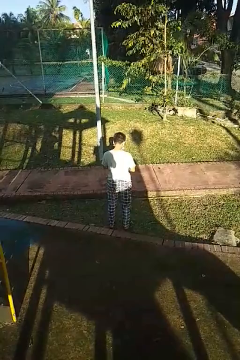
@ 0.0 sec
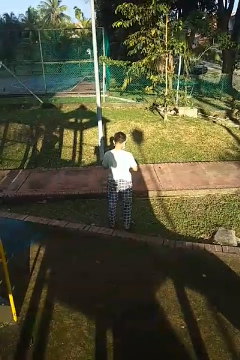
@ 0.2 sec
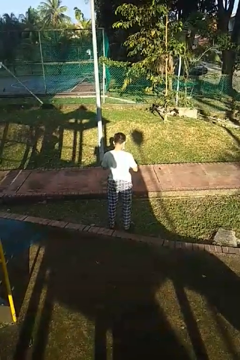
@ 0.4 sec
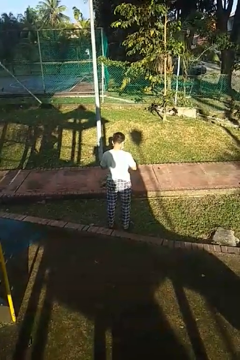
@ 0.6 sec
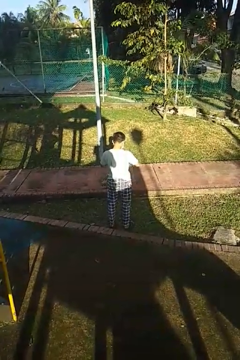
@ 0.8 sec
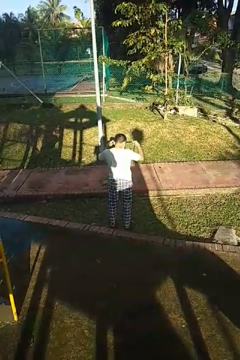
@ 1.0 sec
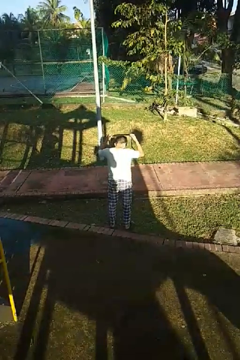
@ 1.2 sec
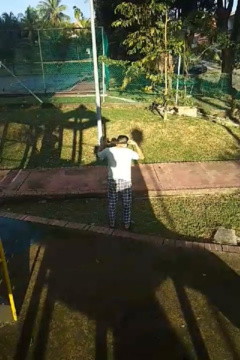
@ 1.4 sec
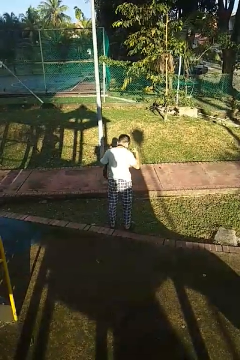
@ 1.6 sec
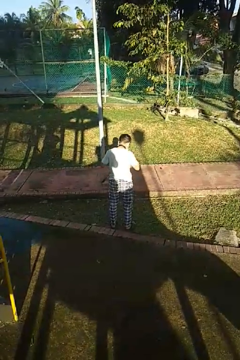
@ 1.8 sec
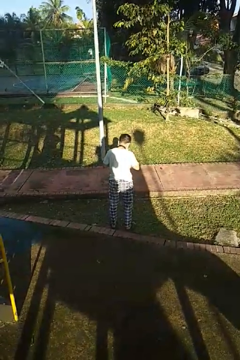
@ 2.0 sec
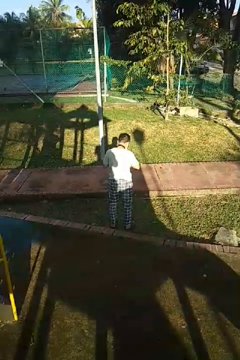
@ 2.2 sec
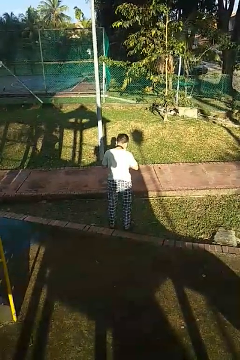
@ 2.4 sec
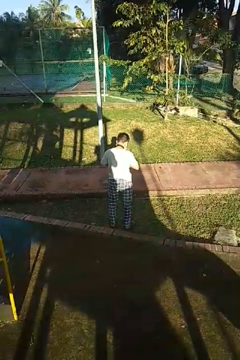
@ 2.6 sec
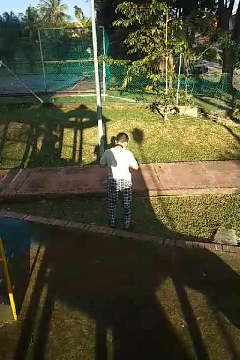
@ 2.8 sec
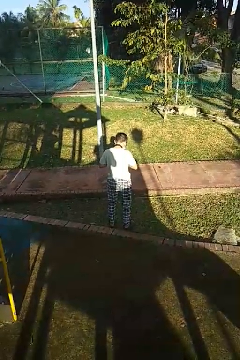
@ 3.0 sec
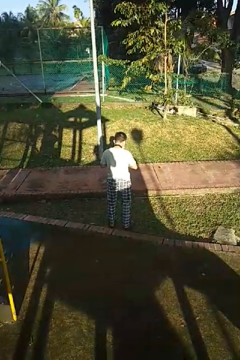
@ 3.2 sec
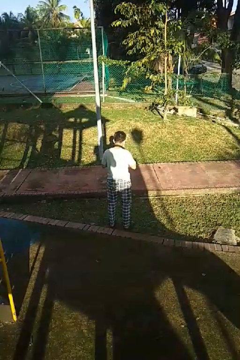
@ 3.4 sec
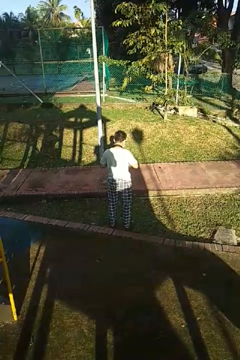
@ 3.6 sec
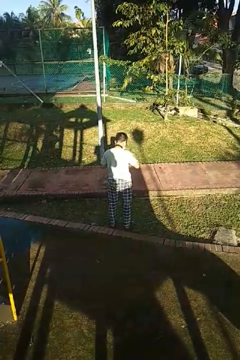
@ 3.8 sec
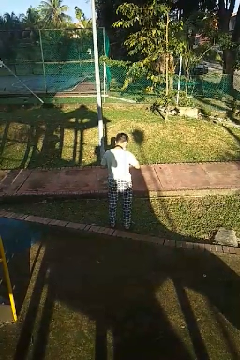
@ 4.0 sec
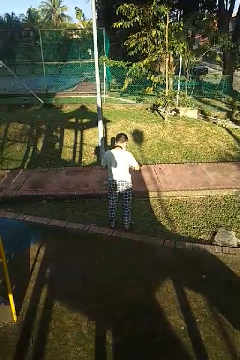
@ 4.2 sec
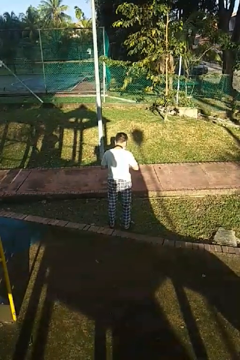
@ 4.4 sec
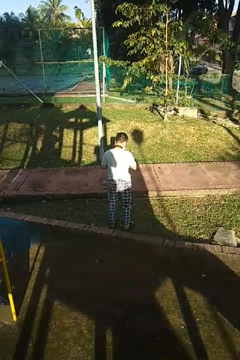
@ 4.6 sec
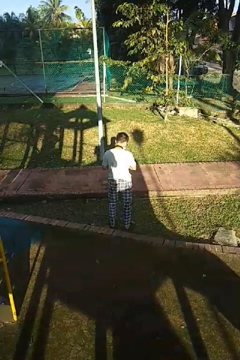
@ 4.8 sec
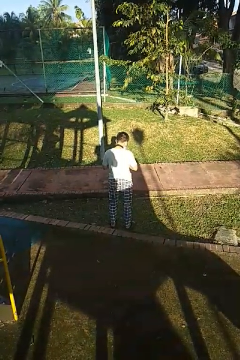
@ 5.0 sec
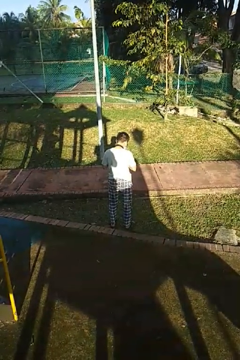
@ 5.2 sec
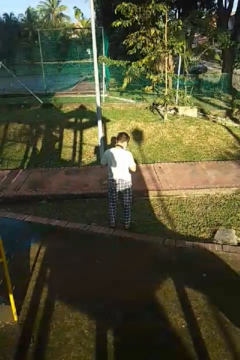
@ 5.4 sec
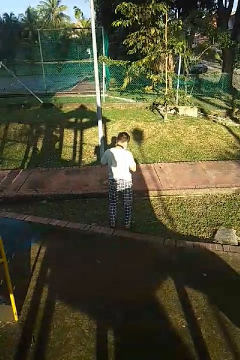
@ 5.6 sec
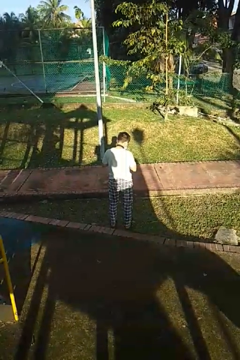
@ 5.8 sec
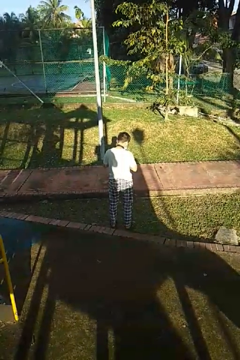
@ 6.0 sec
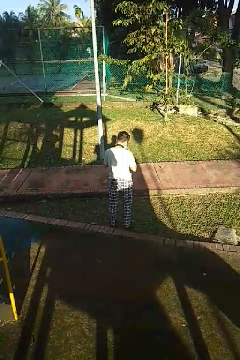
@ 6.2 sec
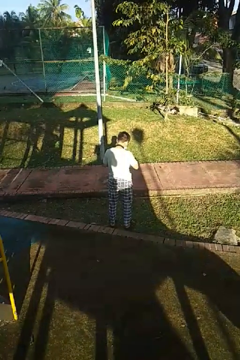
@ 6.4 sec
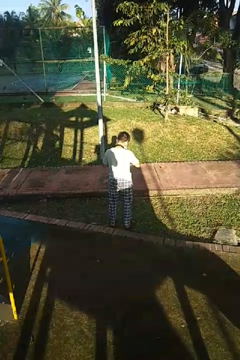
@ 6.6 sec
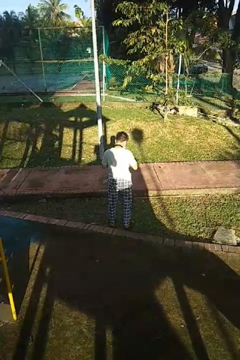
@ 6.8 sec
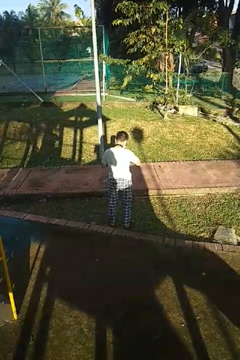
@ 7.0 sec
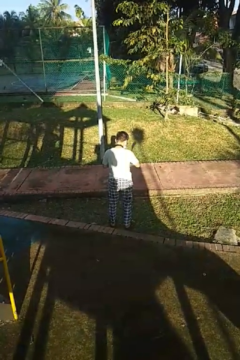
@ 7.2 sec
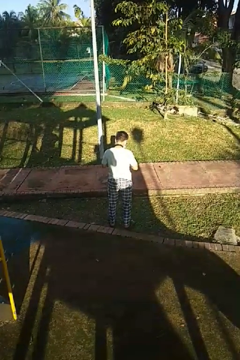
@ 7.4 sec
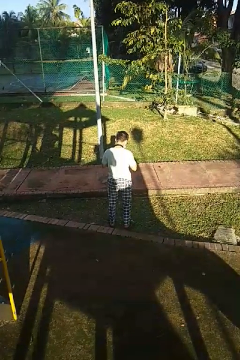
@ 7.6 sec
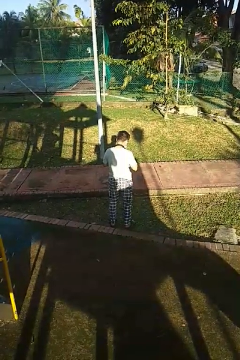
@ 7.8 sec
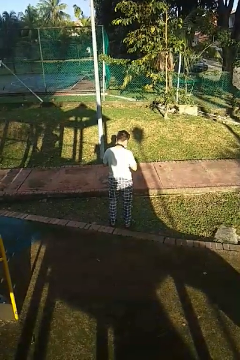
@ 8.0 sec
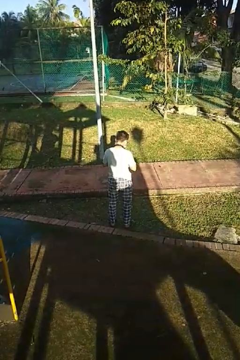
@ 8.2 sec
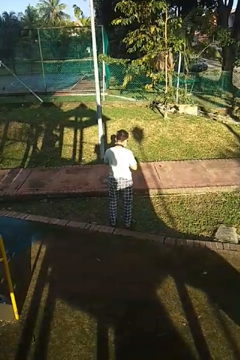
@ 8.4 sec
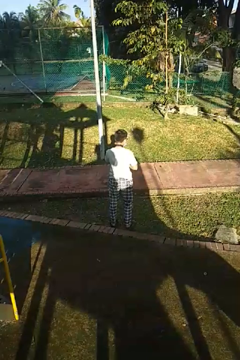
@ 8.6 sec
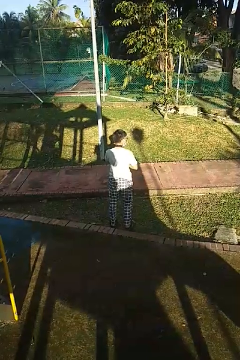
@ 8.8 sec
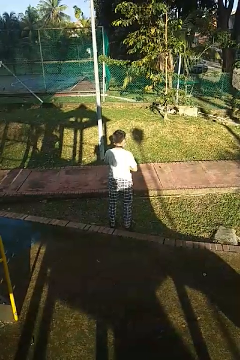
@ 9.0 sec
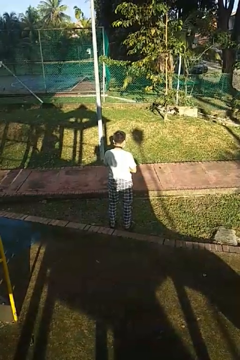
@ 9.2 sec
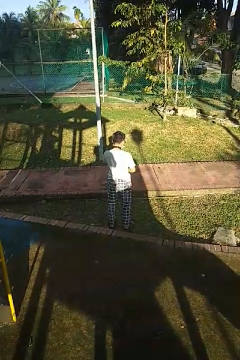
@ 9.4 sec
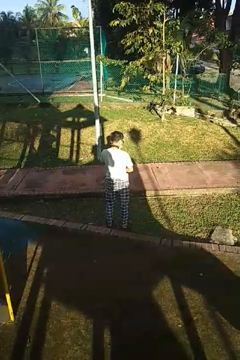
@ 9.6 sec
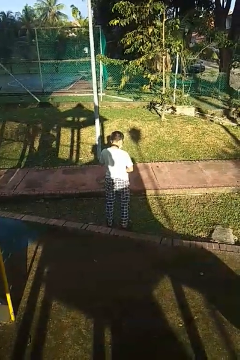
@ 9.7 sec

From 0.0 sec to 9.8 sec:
person puts on necktie

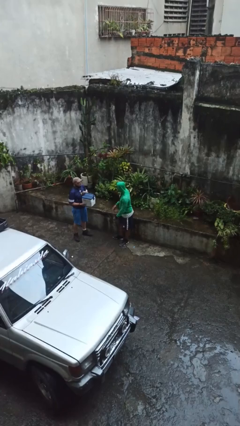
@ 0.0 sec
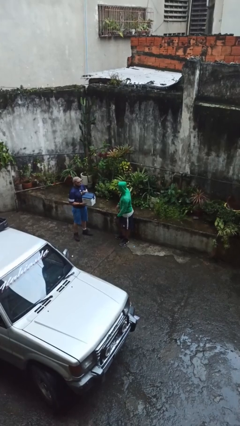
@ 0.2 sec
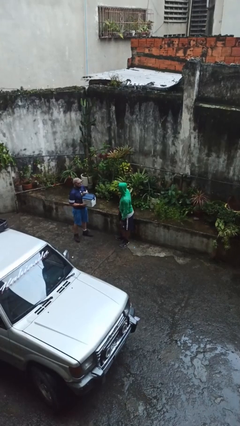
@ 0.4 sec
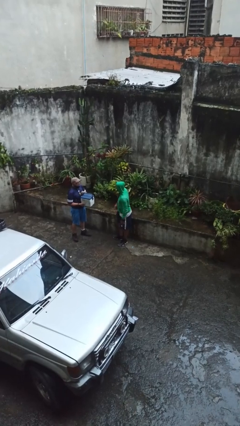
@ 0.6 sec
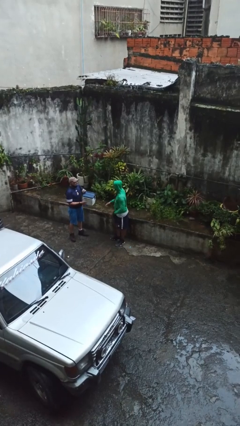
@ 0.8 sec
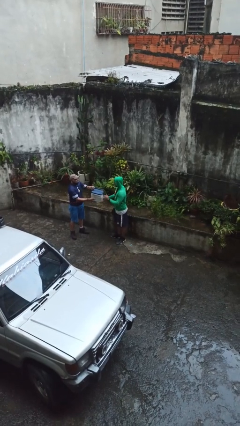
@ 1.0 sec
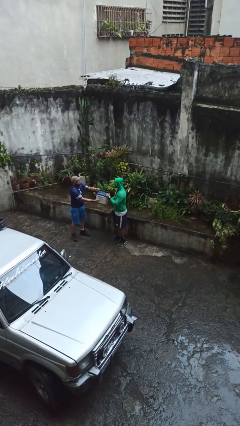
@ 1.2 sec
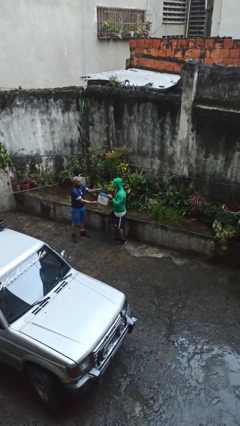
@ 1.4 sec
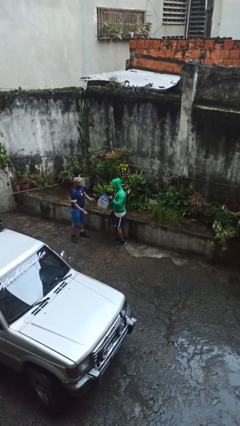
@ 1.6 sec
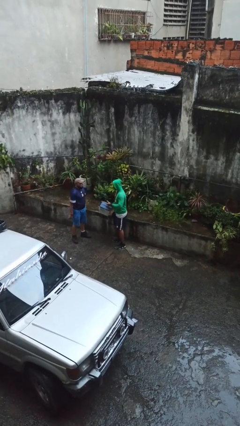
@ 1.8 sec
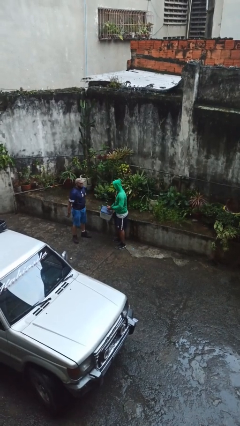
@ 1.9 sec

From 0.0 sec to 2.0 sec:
person transfers object to person

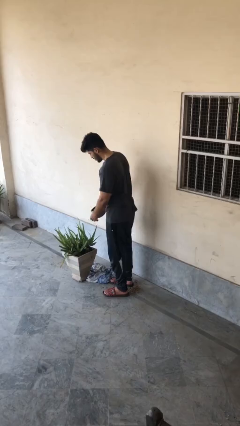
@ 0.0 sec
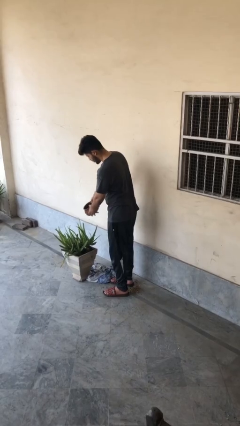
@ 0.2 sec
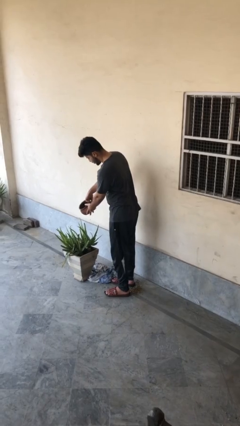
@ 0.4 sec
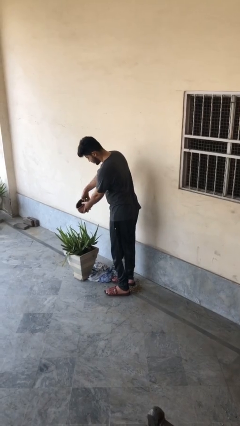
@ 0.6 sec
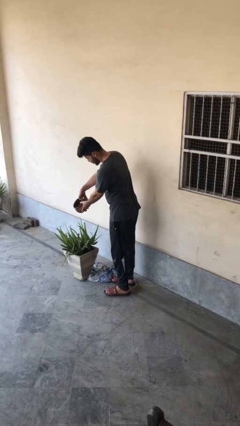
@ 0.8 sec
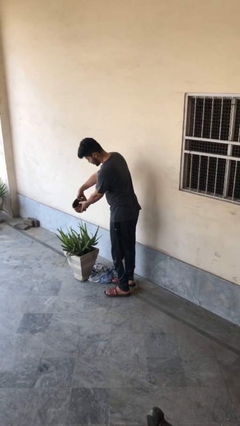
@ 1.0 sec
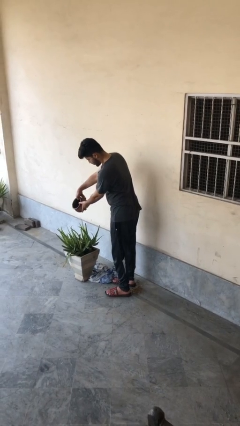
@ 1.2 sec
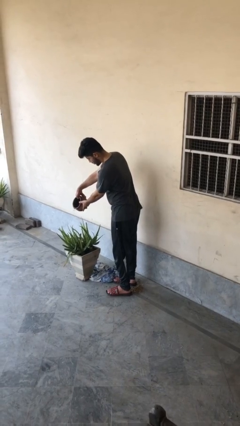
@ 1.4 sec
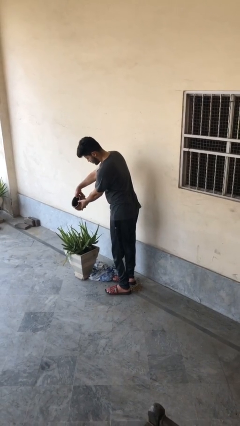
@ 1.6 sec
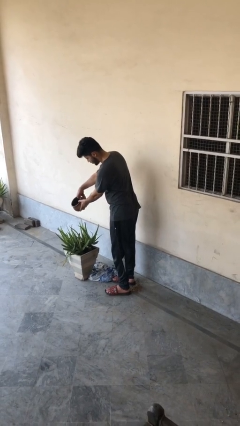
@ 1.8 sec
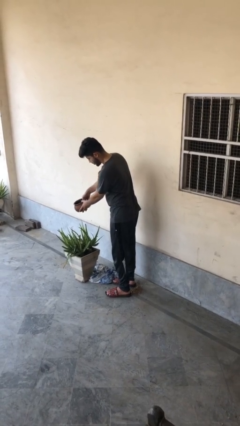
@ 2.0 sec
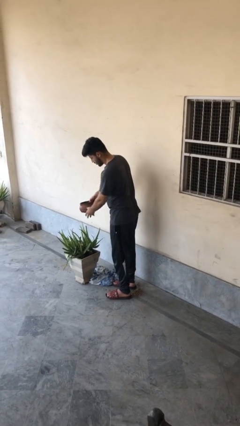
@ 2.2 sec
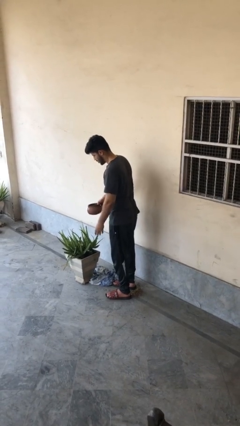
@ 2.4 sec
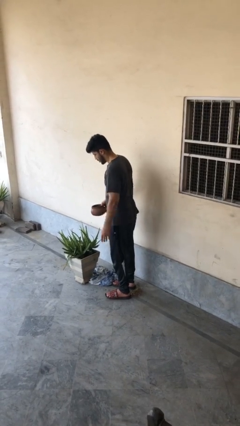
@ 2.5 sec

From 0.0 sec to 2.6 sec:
person waters houseplant

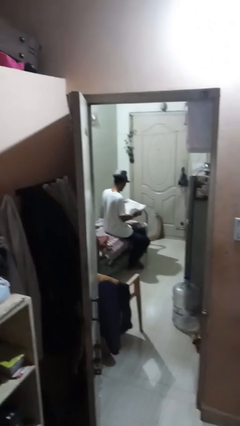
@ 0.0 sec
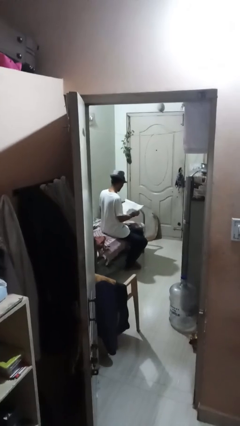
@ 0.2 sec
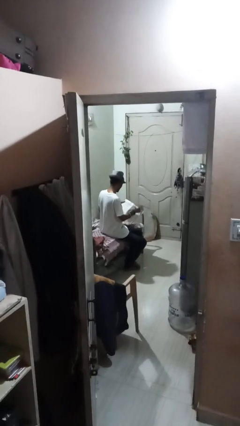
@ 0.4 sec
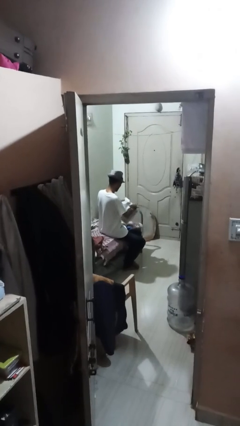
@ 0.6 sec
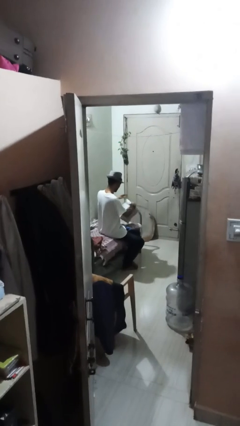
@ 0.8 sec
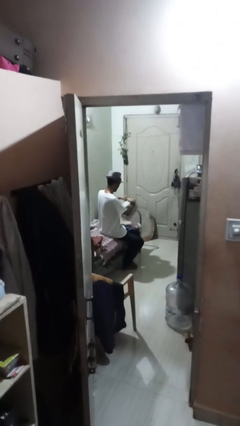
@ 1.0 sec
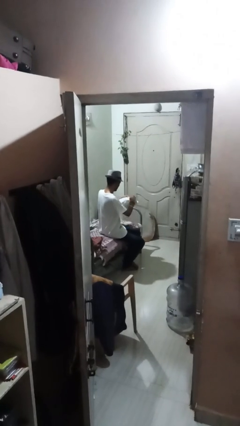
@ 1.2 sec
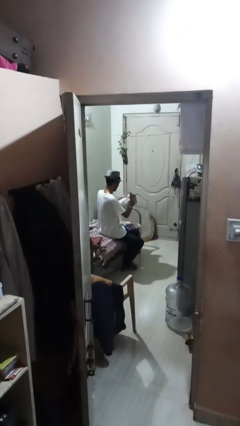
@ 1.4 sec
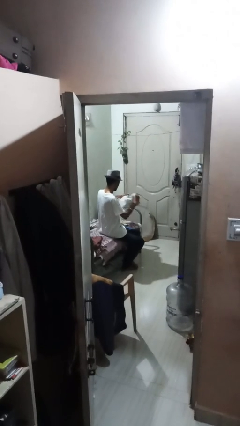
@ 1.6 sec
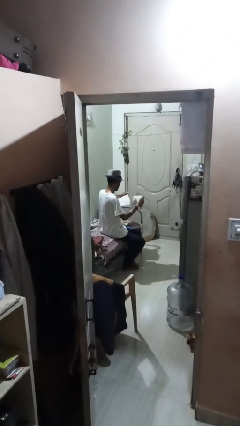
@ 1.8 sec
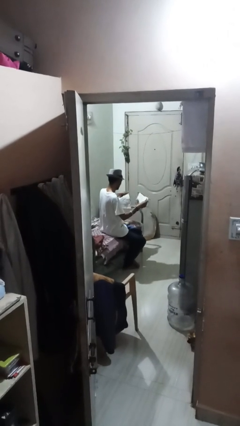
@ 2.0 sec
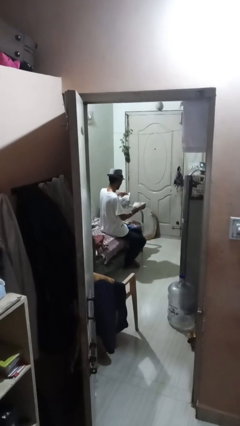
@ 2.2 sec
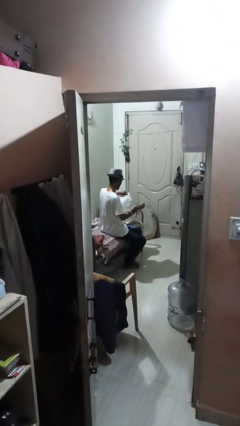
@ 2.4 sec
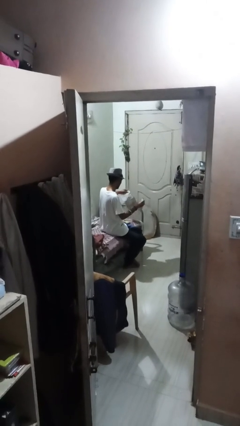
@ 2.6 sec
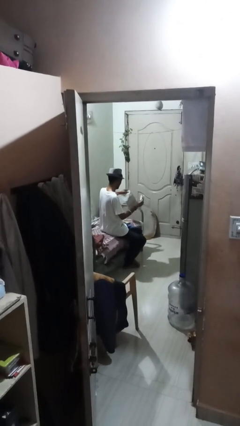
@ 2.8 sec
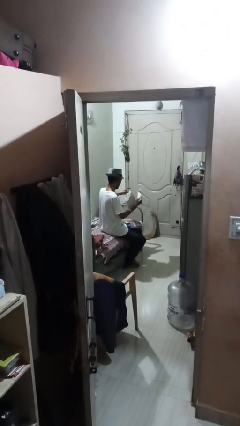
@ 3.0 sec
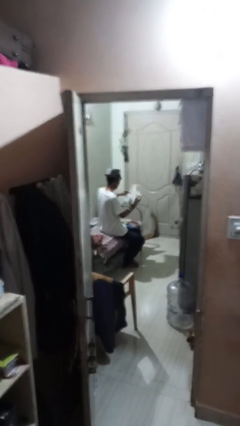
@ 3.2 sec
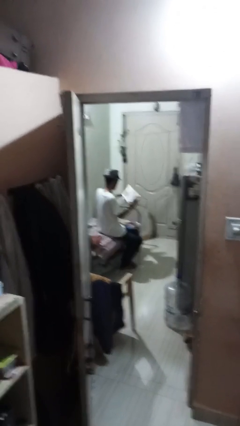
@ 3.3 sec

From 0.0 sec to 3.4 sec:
person tears paper

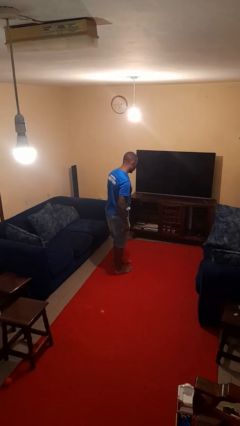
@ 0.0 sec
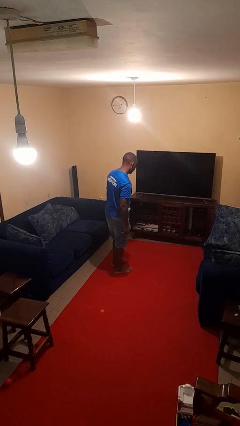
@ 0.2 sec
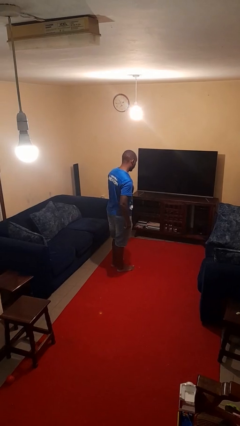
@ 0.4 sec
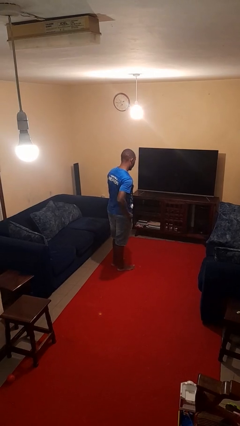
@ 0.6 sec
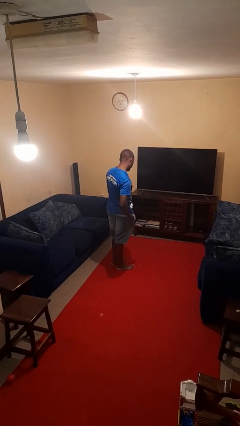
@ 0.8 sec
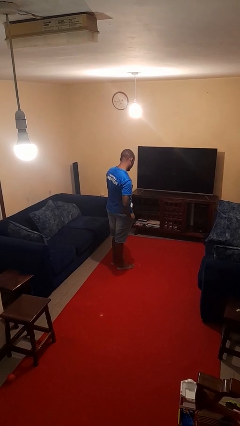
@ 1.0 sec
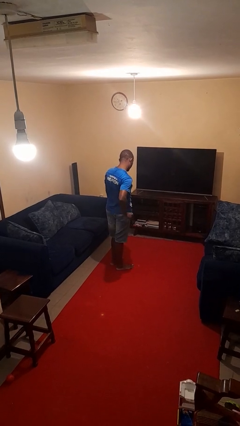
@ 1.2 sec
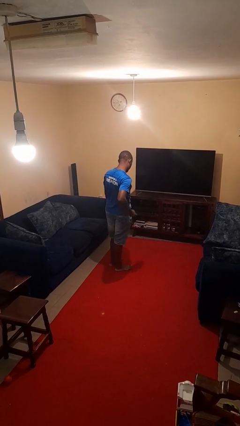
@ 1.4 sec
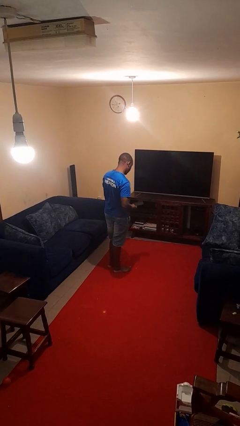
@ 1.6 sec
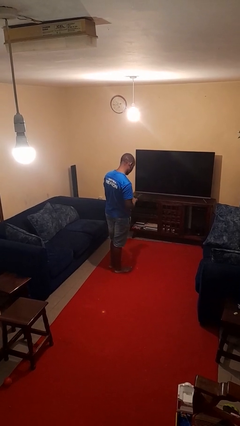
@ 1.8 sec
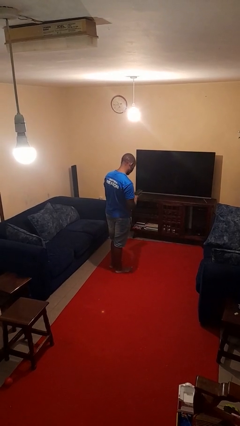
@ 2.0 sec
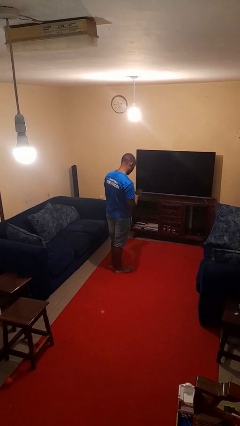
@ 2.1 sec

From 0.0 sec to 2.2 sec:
person takes phone from pocket
